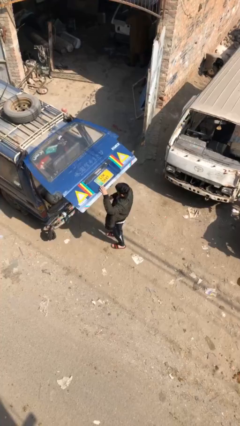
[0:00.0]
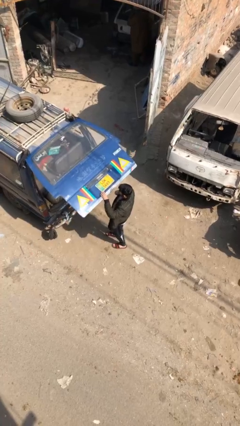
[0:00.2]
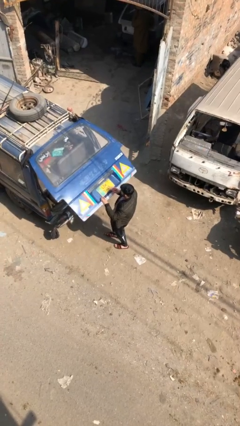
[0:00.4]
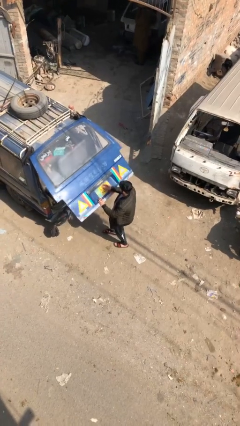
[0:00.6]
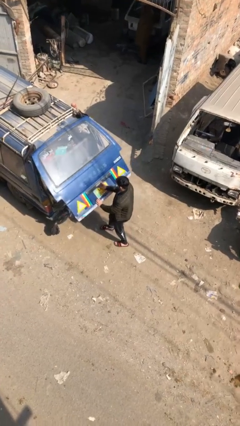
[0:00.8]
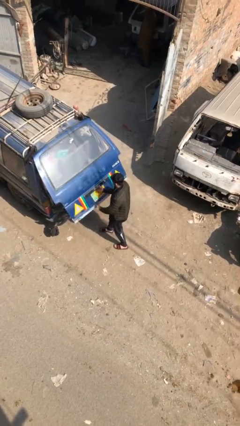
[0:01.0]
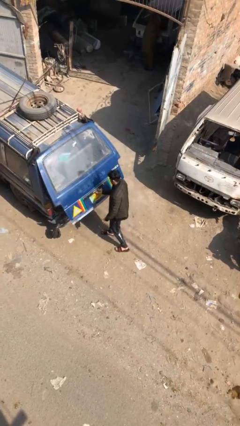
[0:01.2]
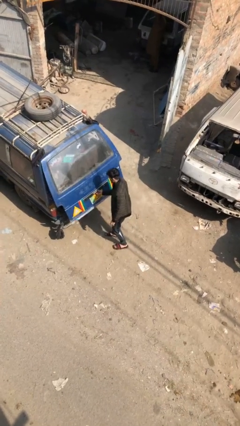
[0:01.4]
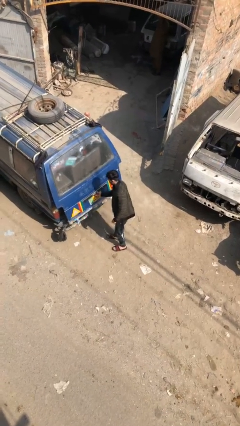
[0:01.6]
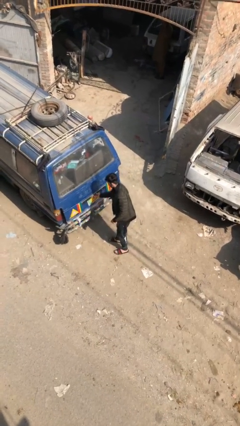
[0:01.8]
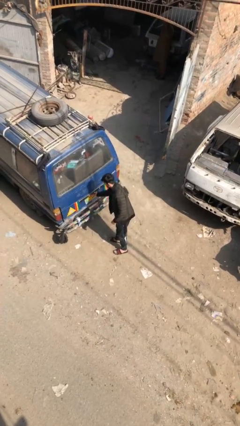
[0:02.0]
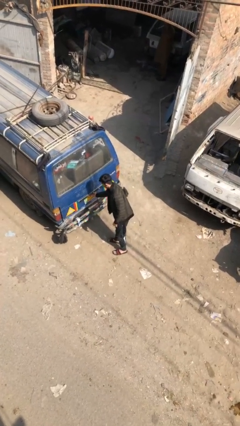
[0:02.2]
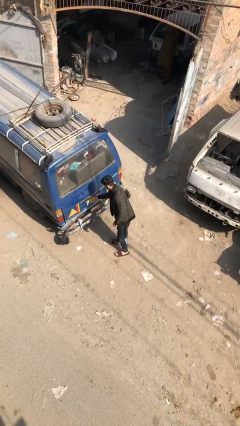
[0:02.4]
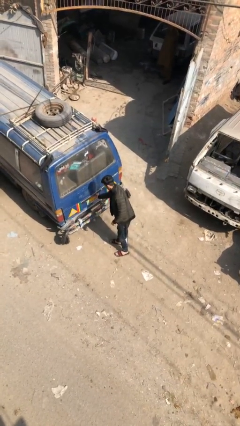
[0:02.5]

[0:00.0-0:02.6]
person closes car trunk

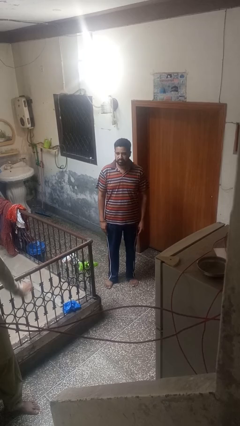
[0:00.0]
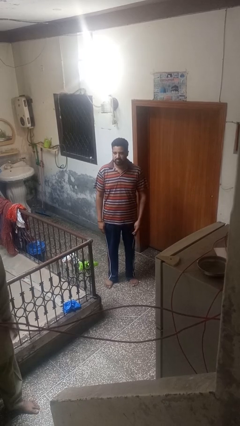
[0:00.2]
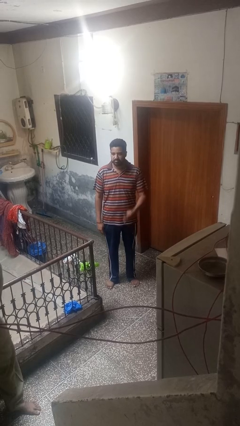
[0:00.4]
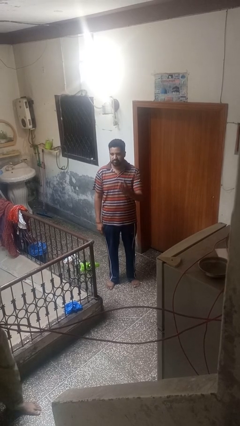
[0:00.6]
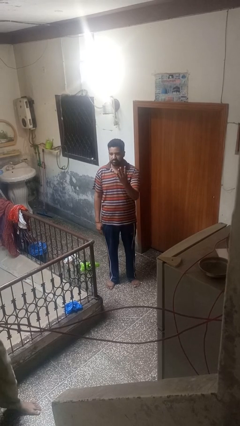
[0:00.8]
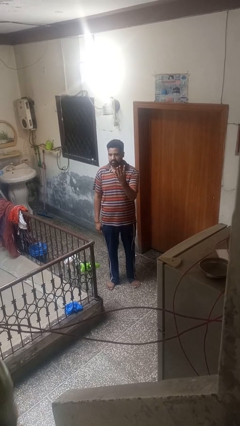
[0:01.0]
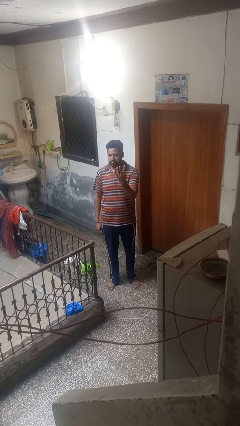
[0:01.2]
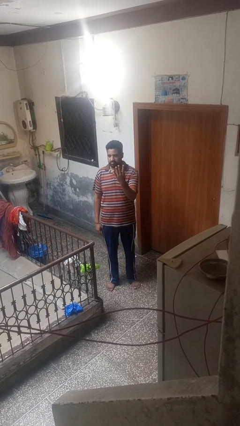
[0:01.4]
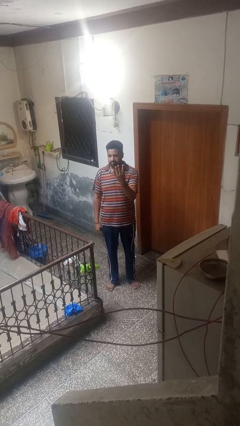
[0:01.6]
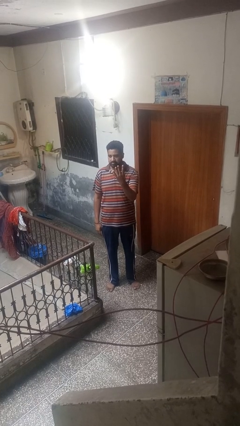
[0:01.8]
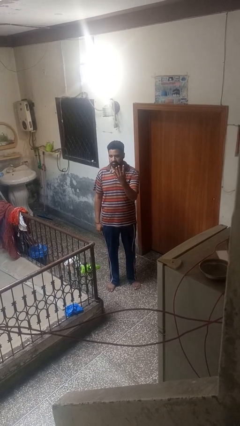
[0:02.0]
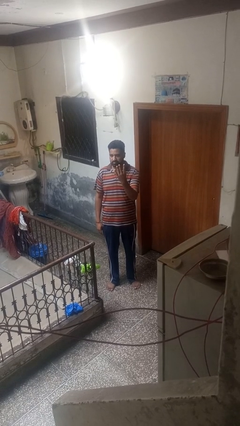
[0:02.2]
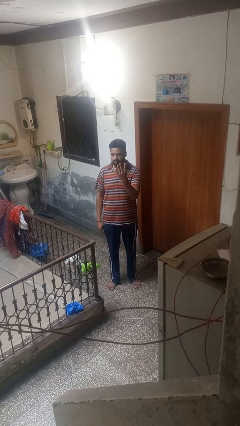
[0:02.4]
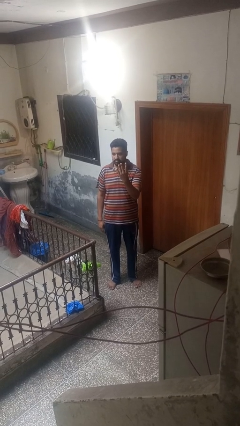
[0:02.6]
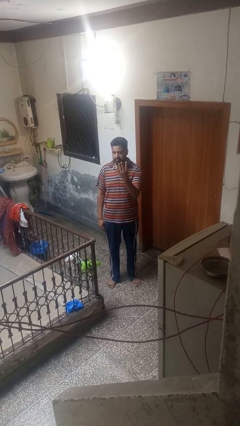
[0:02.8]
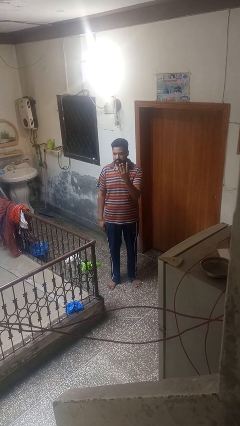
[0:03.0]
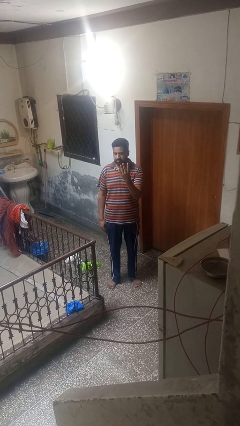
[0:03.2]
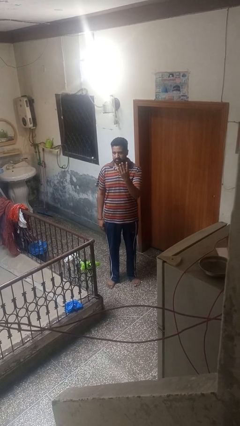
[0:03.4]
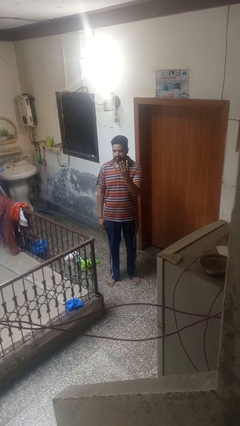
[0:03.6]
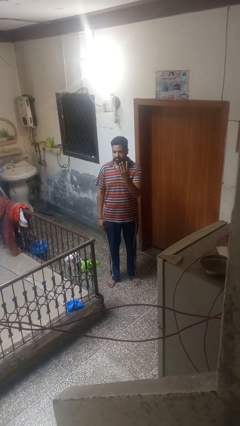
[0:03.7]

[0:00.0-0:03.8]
person gestures number four

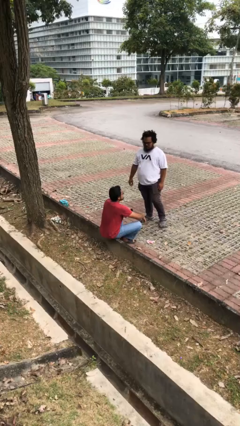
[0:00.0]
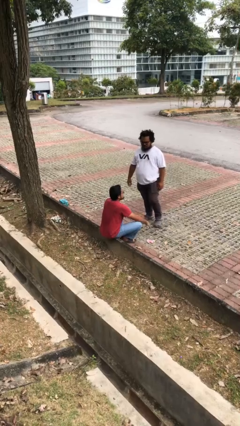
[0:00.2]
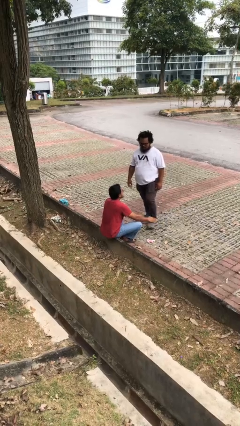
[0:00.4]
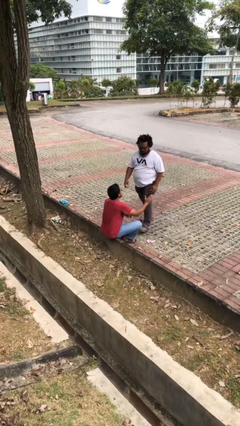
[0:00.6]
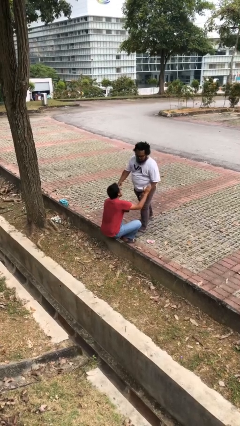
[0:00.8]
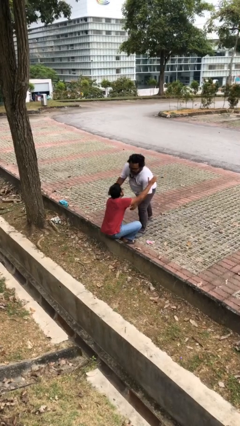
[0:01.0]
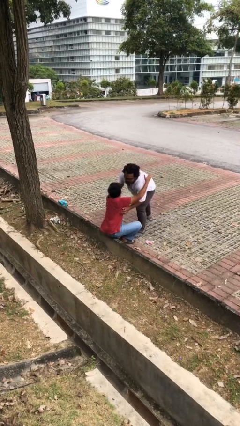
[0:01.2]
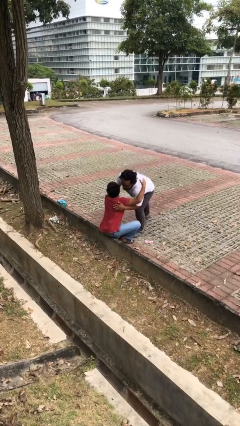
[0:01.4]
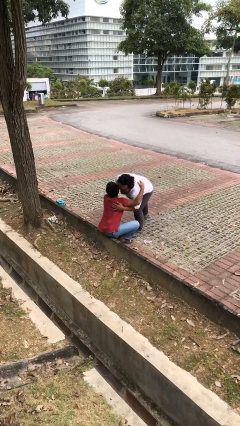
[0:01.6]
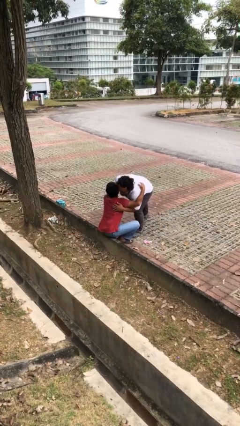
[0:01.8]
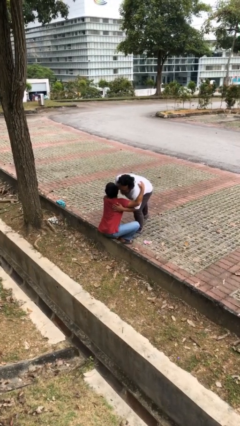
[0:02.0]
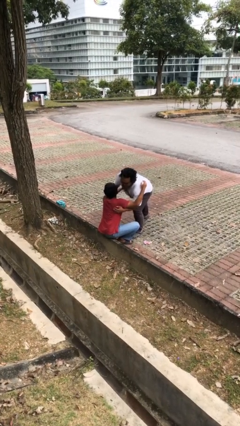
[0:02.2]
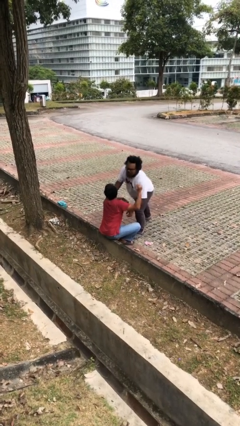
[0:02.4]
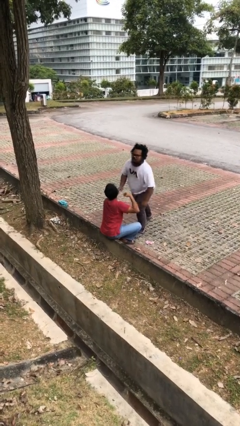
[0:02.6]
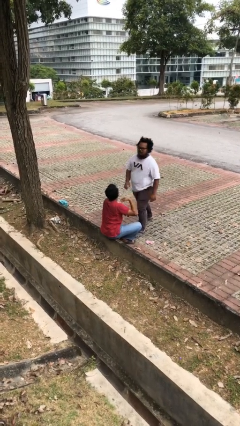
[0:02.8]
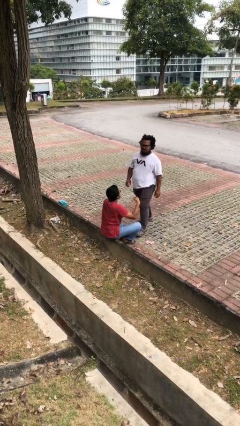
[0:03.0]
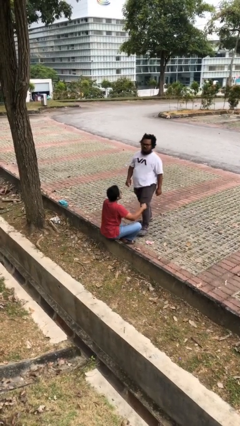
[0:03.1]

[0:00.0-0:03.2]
person embraces person

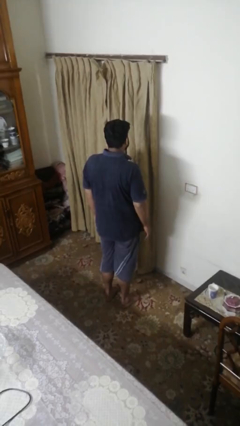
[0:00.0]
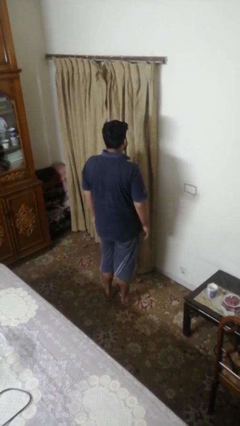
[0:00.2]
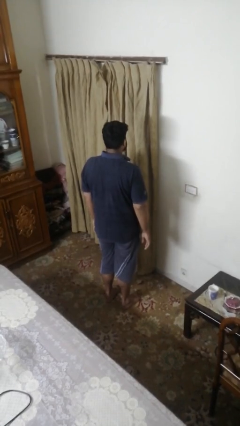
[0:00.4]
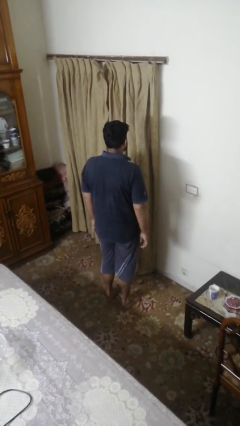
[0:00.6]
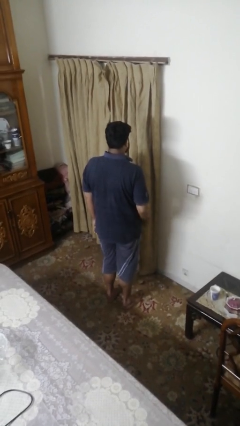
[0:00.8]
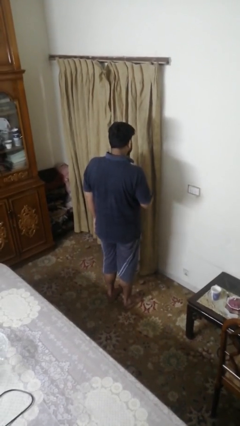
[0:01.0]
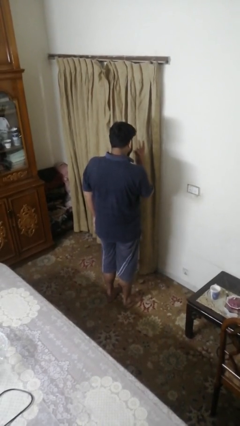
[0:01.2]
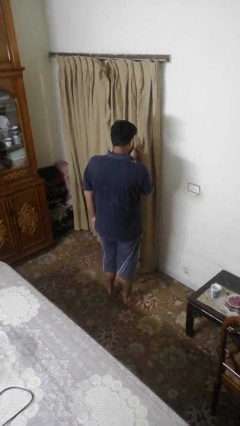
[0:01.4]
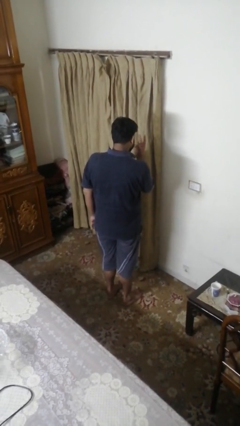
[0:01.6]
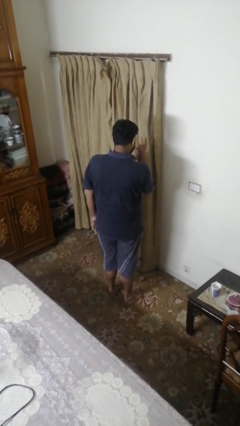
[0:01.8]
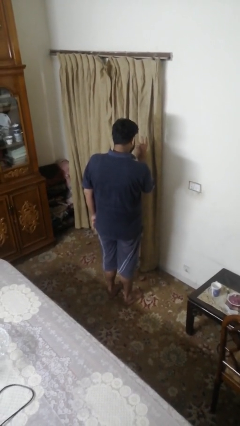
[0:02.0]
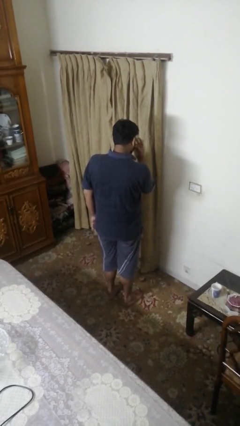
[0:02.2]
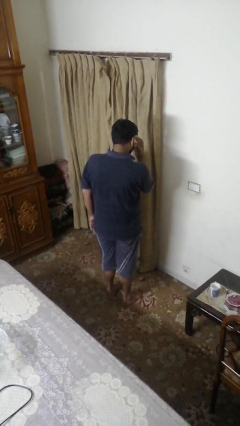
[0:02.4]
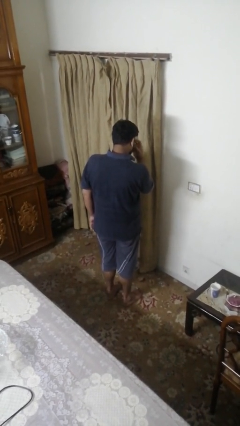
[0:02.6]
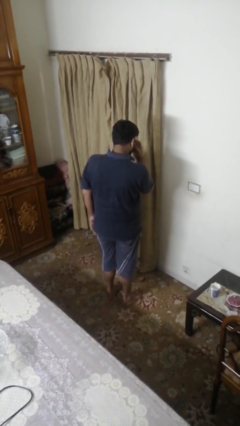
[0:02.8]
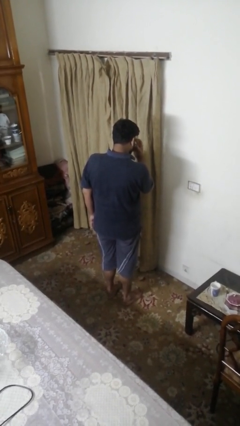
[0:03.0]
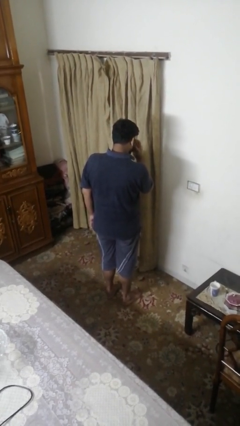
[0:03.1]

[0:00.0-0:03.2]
person gestures watch closely

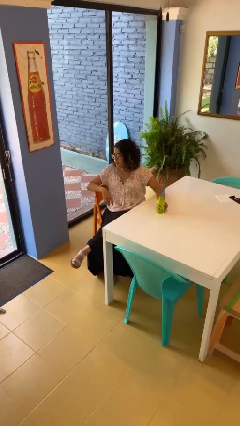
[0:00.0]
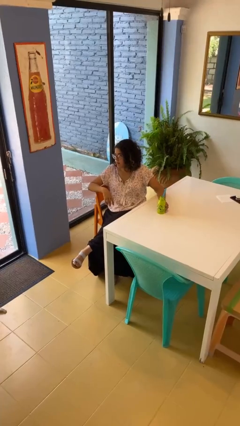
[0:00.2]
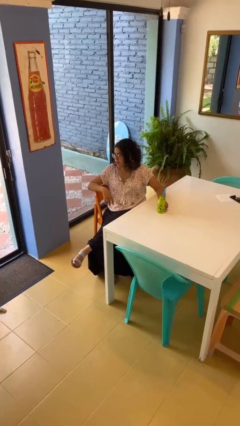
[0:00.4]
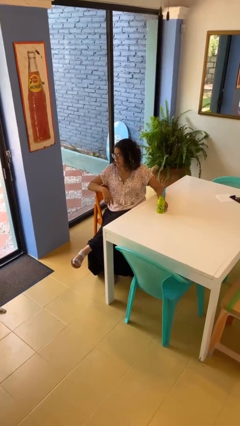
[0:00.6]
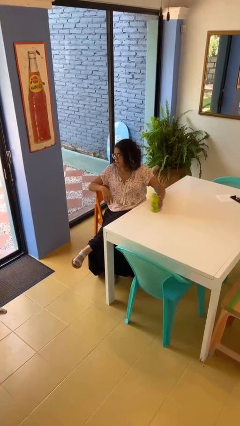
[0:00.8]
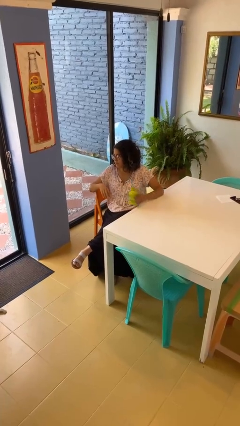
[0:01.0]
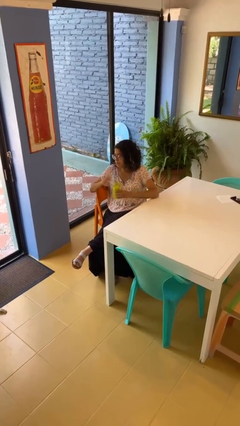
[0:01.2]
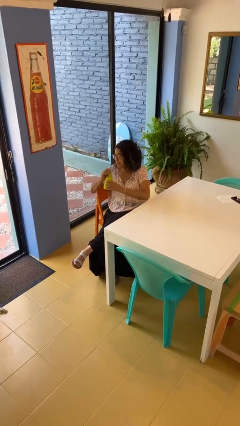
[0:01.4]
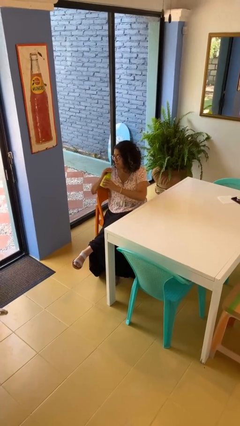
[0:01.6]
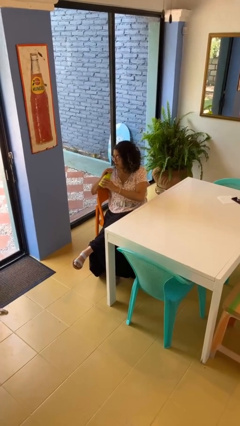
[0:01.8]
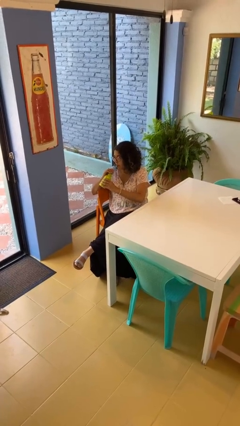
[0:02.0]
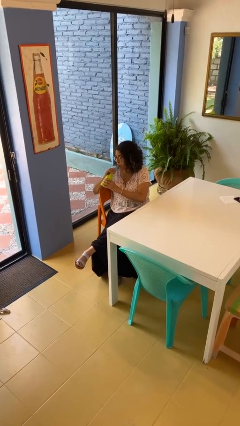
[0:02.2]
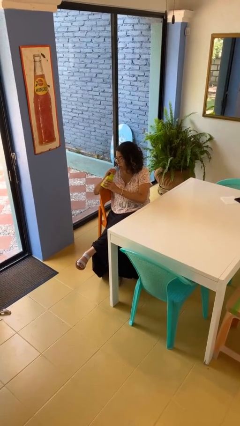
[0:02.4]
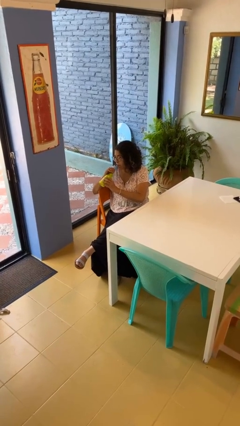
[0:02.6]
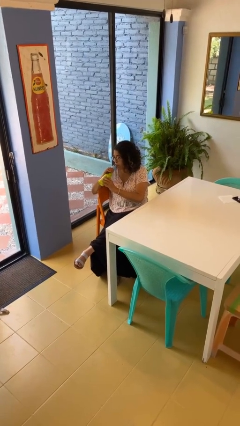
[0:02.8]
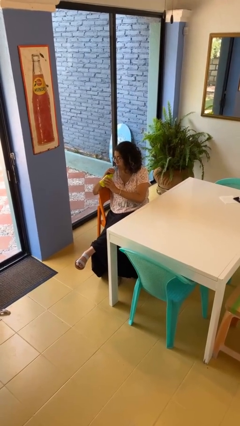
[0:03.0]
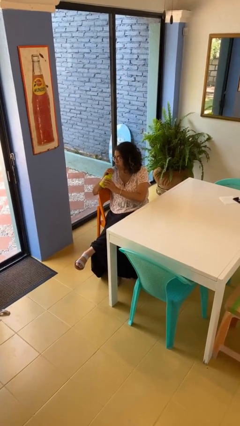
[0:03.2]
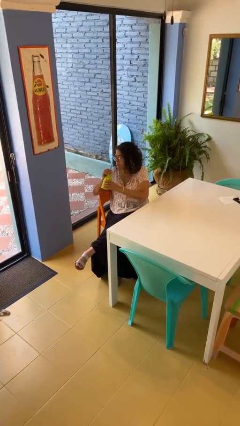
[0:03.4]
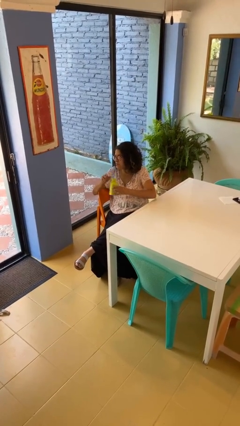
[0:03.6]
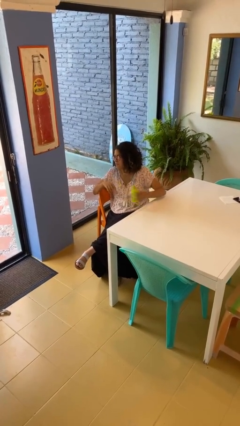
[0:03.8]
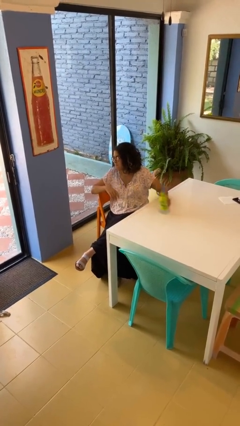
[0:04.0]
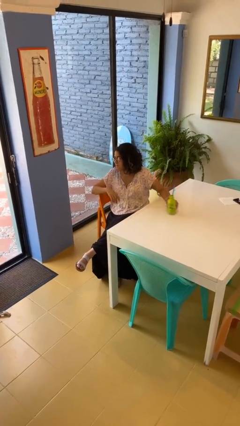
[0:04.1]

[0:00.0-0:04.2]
person drinks from straw

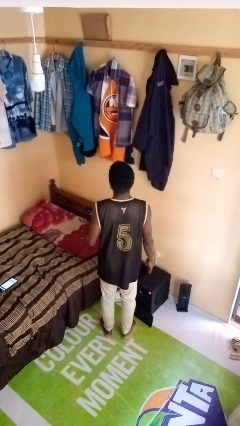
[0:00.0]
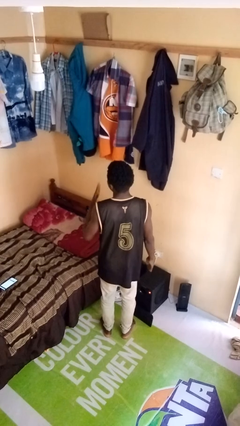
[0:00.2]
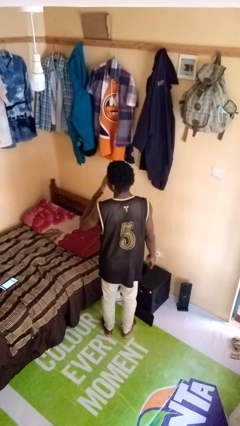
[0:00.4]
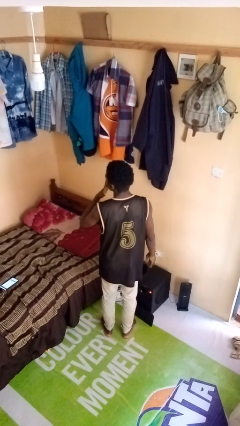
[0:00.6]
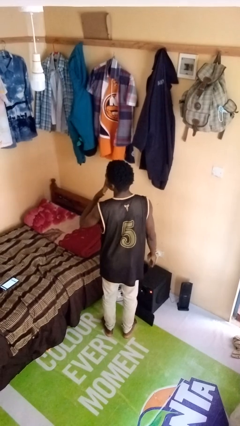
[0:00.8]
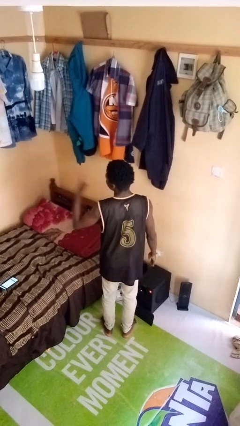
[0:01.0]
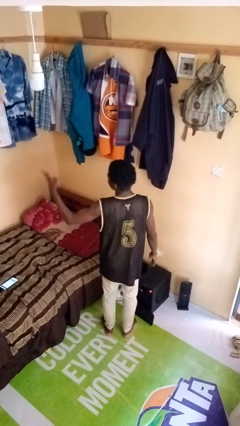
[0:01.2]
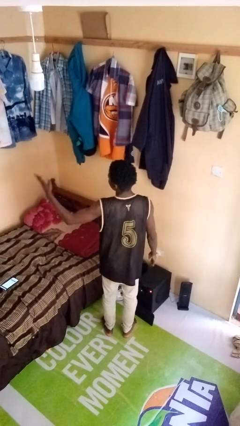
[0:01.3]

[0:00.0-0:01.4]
person gestures blow kiss
